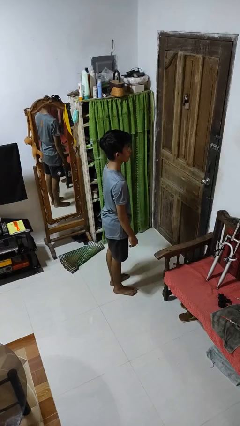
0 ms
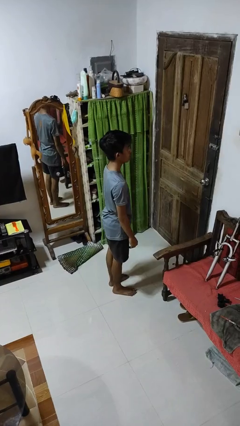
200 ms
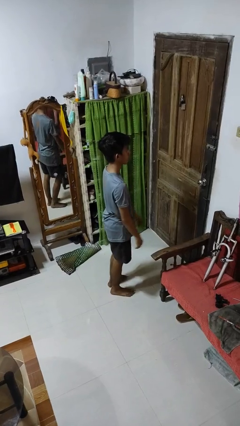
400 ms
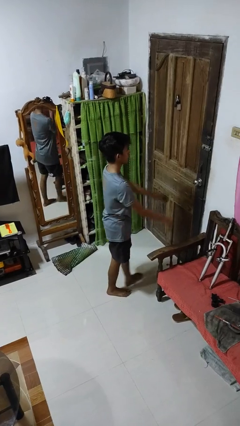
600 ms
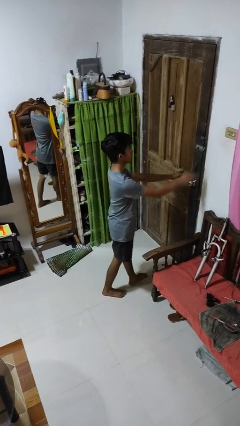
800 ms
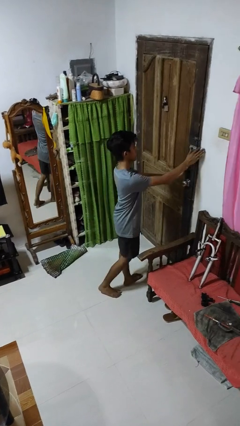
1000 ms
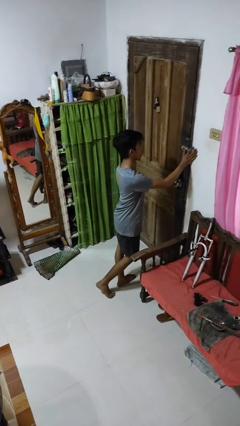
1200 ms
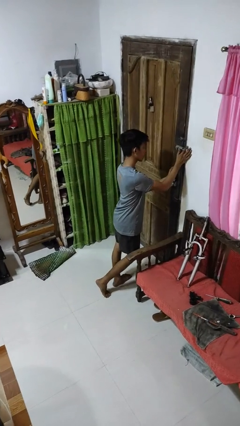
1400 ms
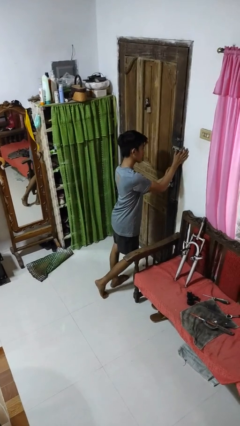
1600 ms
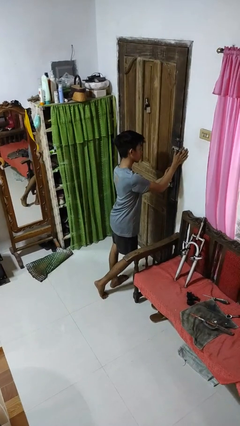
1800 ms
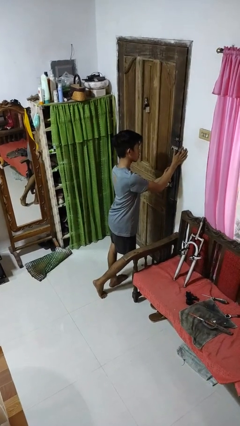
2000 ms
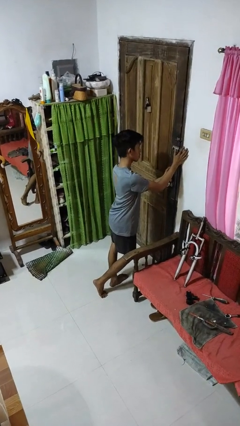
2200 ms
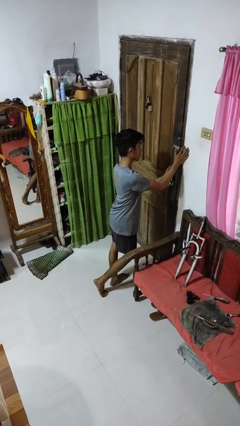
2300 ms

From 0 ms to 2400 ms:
person unlocks door with keys

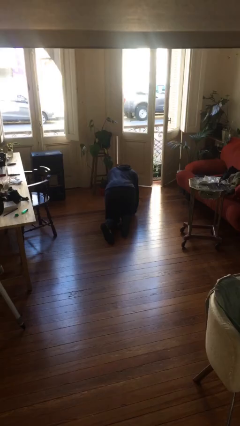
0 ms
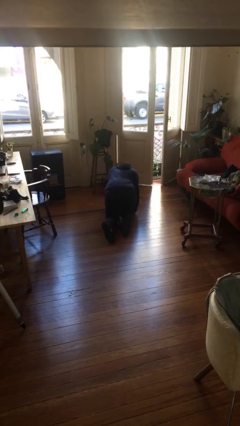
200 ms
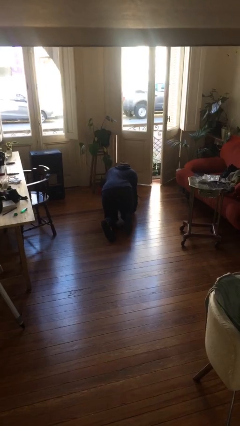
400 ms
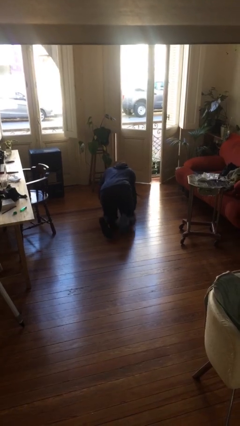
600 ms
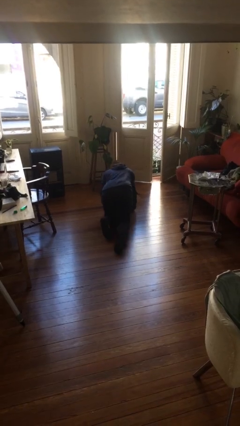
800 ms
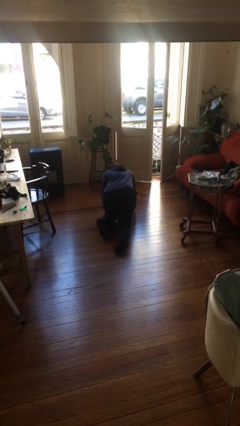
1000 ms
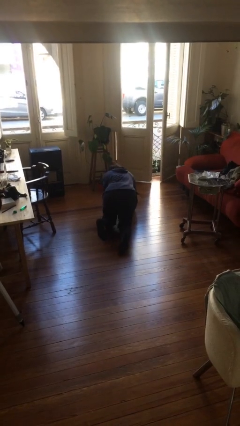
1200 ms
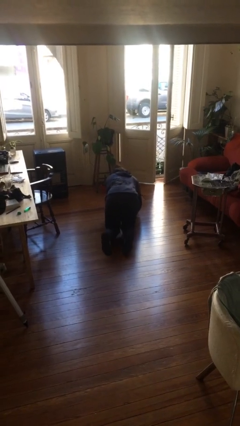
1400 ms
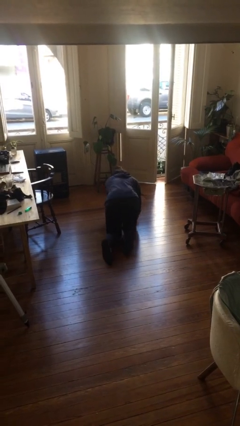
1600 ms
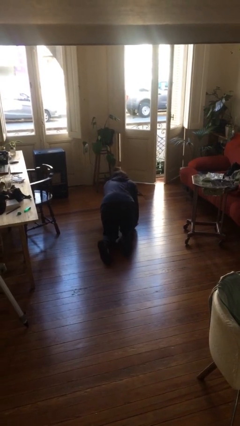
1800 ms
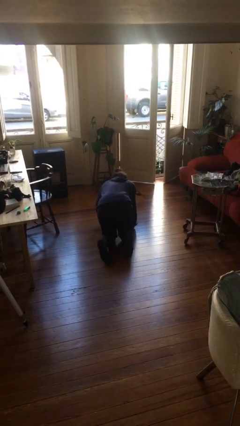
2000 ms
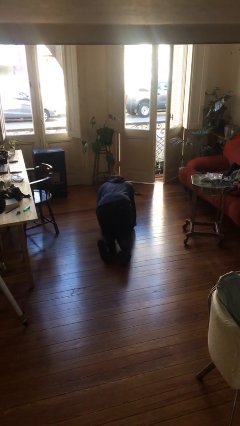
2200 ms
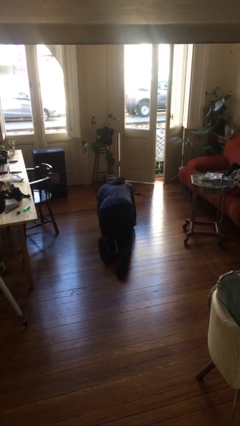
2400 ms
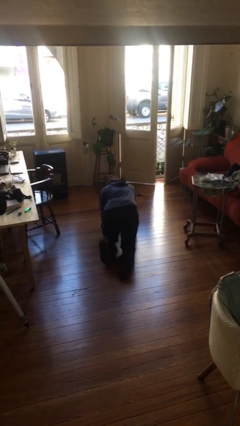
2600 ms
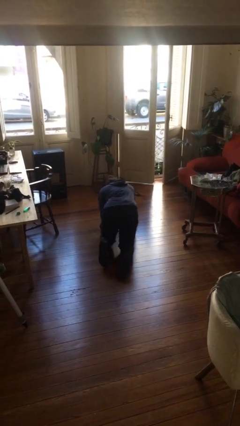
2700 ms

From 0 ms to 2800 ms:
person crawls

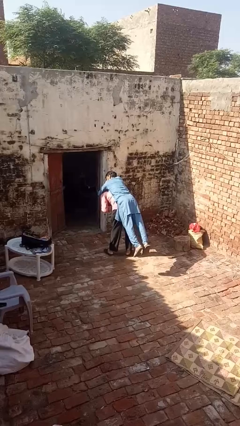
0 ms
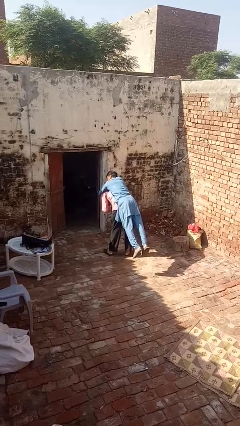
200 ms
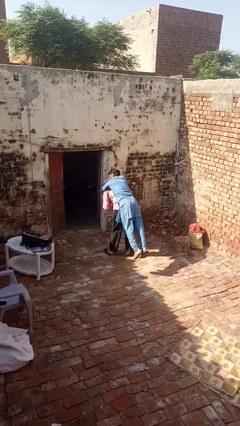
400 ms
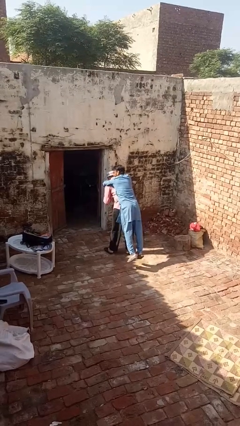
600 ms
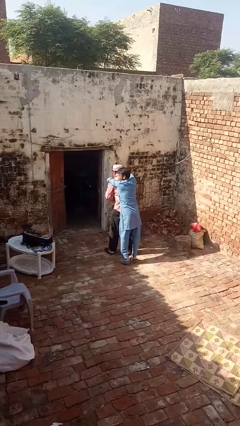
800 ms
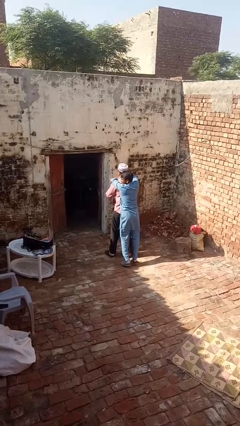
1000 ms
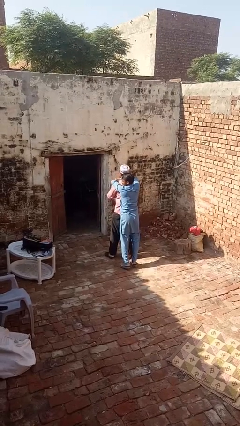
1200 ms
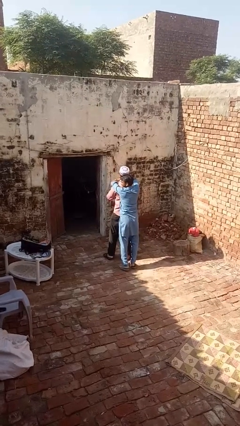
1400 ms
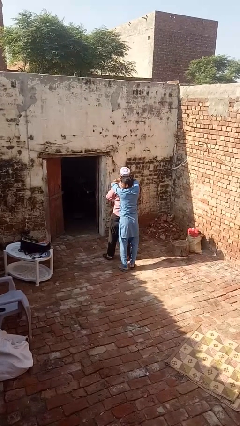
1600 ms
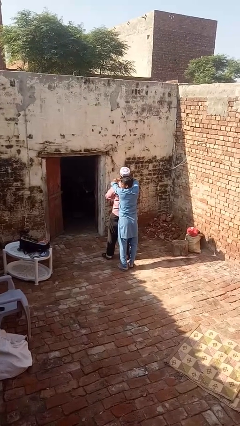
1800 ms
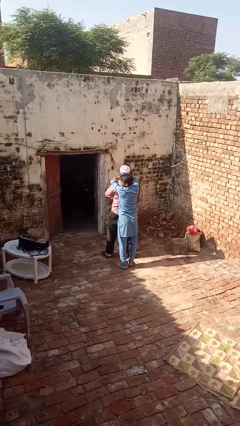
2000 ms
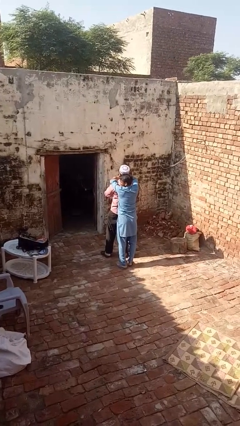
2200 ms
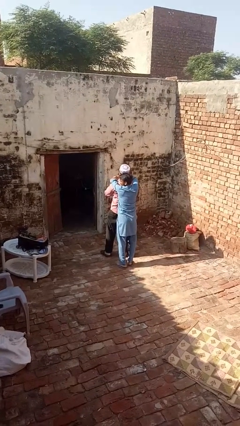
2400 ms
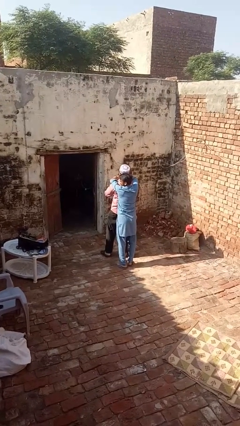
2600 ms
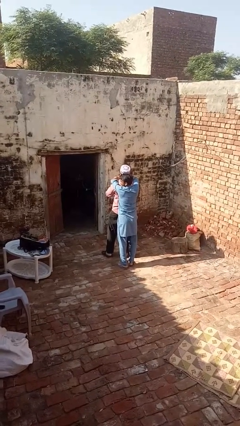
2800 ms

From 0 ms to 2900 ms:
person puts down person

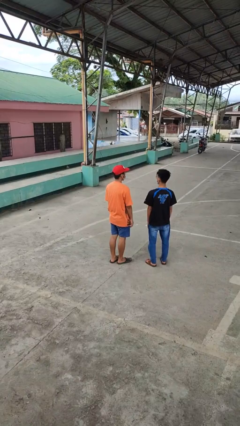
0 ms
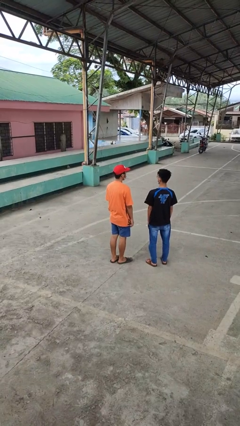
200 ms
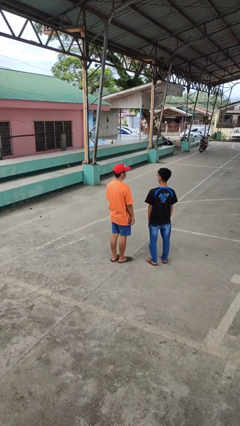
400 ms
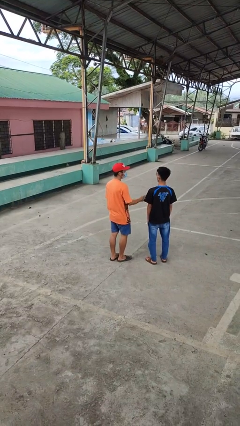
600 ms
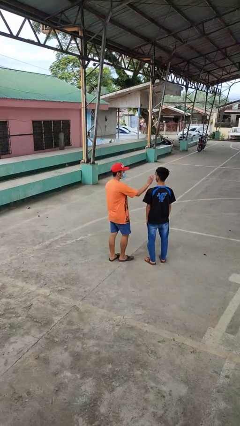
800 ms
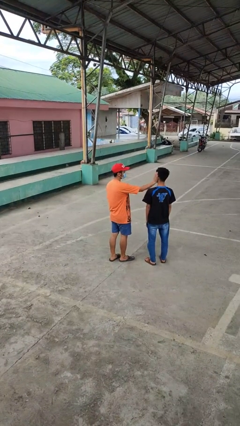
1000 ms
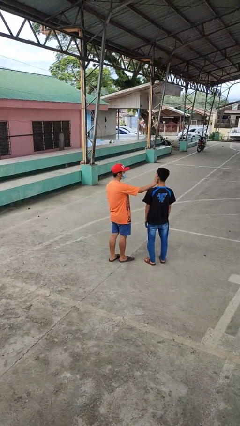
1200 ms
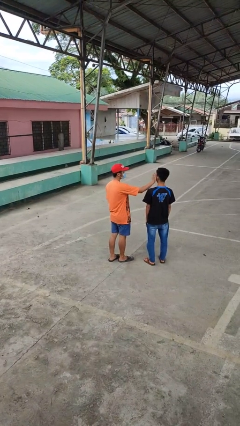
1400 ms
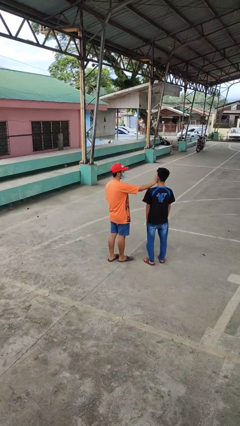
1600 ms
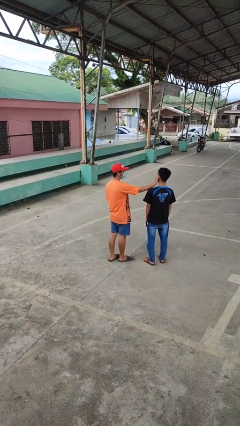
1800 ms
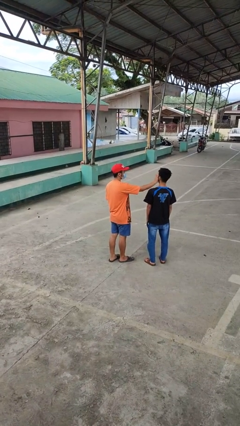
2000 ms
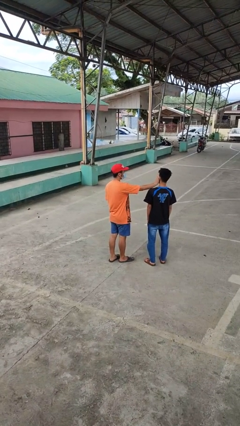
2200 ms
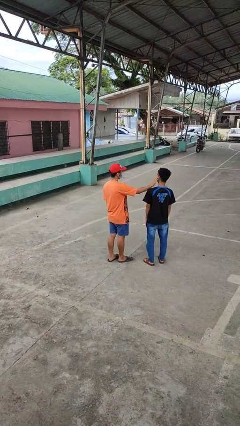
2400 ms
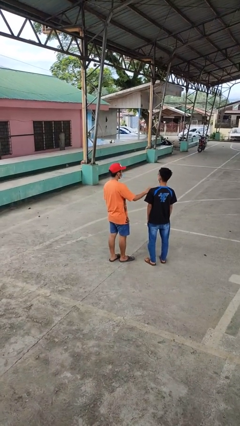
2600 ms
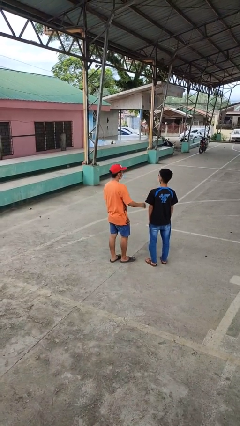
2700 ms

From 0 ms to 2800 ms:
person touches face of person

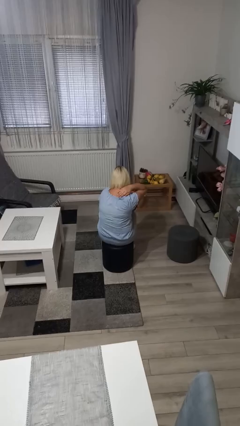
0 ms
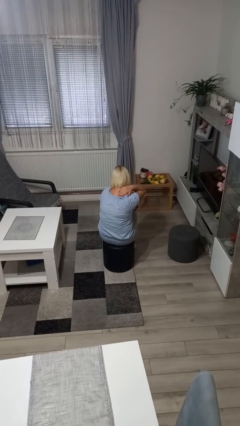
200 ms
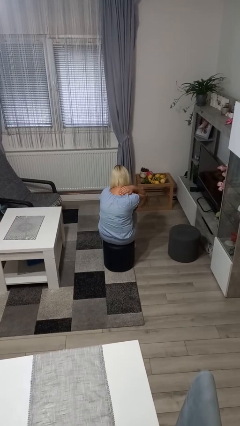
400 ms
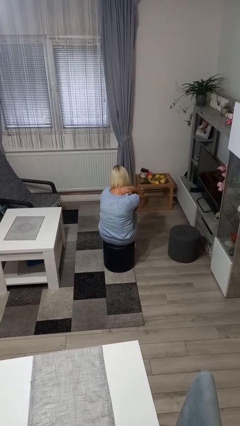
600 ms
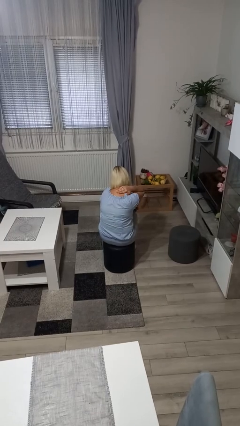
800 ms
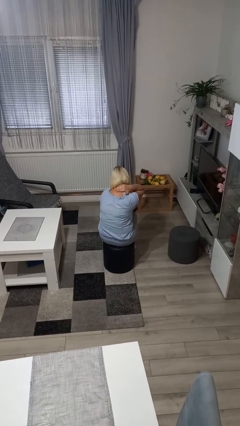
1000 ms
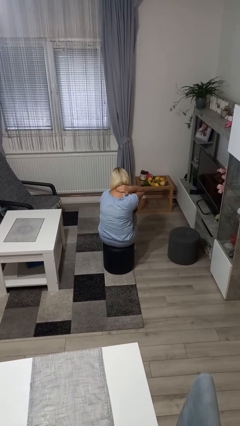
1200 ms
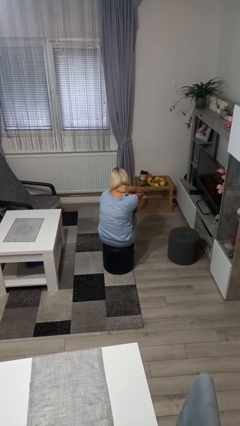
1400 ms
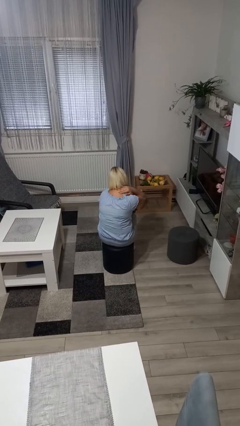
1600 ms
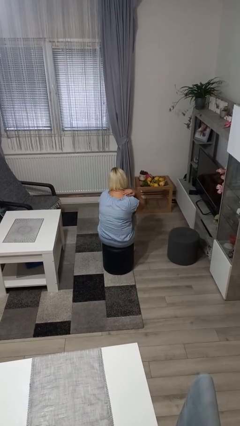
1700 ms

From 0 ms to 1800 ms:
person rubs neck

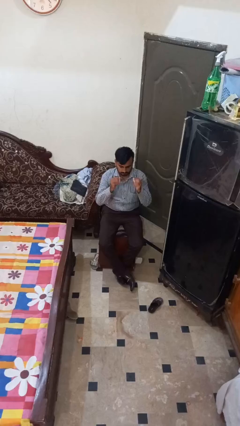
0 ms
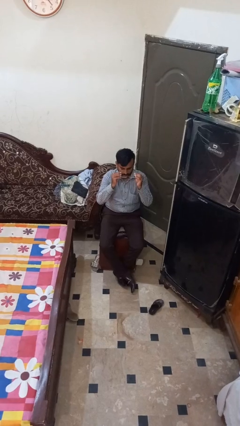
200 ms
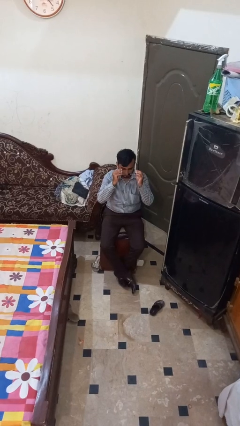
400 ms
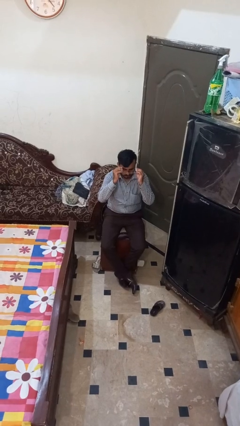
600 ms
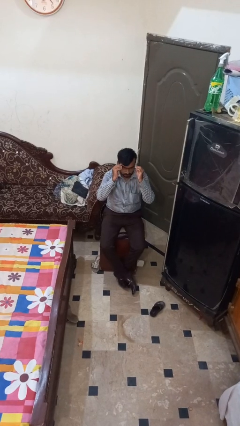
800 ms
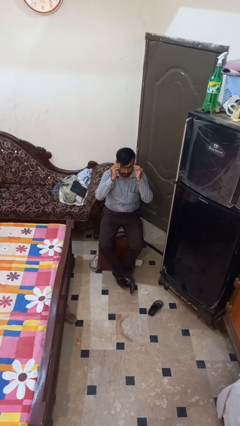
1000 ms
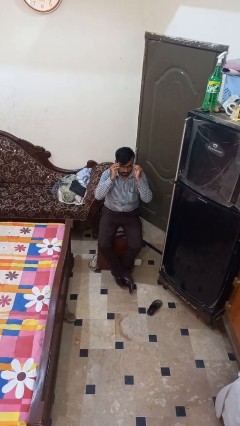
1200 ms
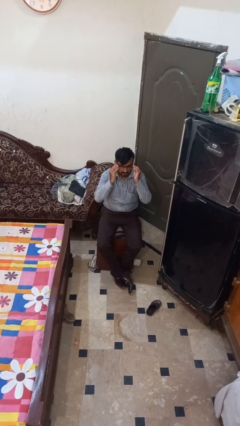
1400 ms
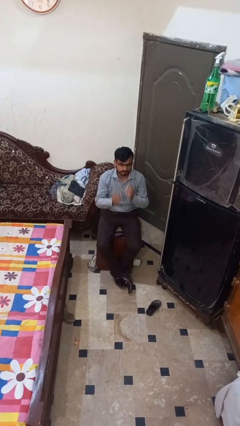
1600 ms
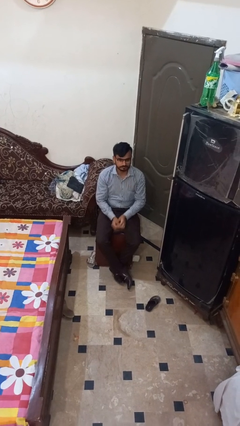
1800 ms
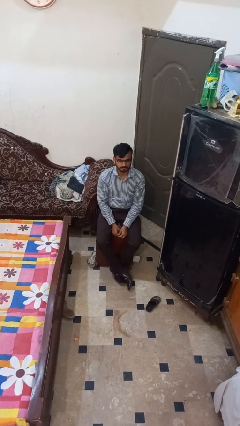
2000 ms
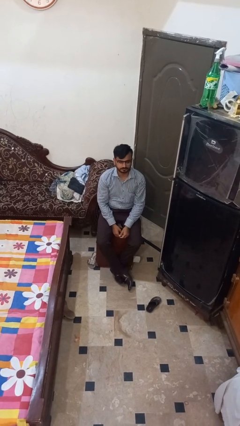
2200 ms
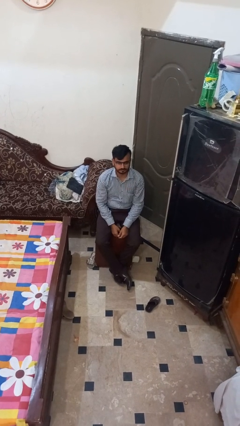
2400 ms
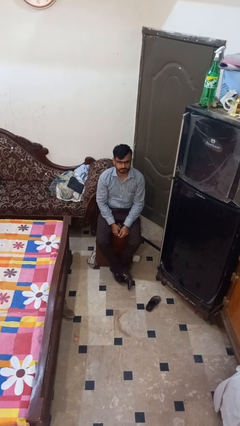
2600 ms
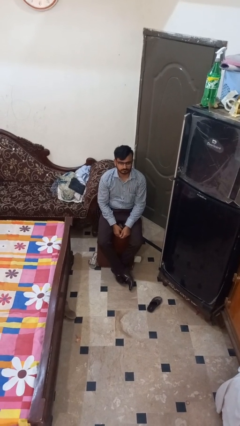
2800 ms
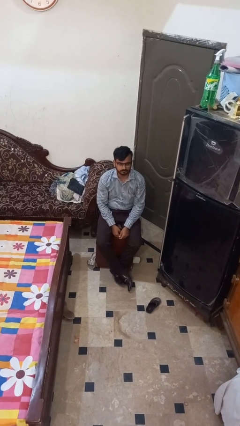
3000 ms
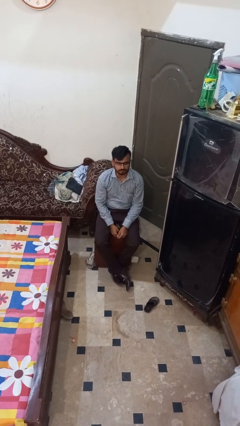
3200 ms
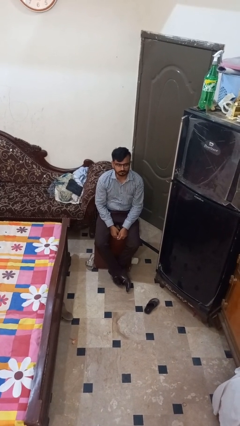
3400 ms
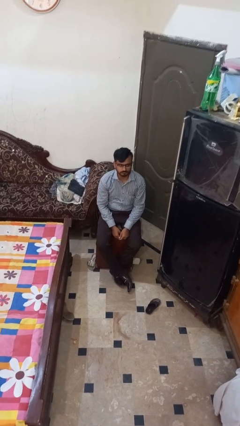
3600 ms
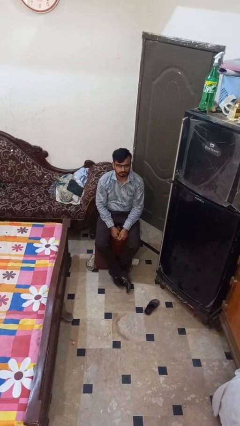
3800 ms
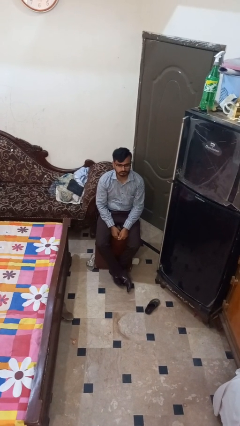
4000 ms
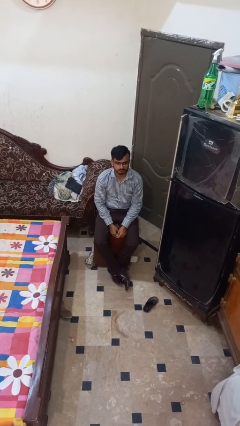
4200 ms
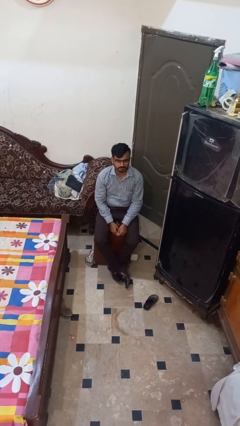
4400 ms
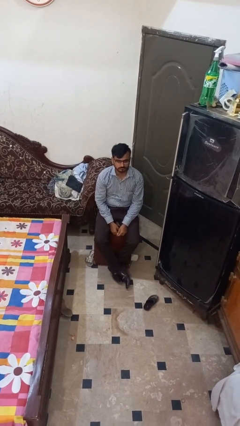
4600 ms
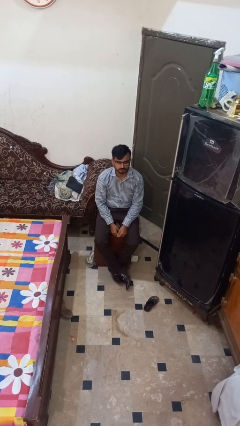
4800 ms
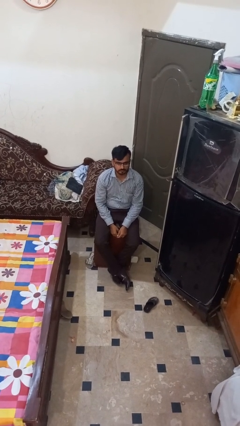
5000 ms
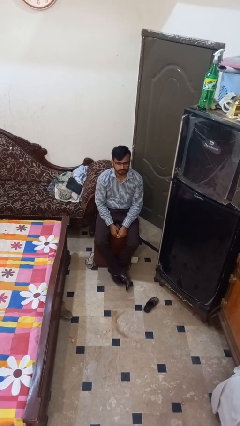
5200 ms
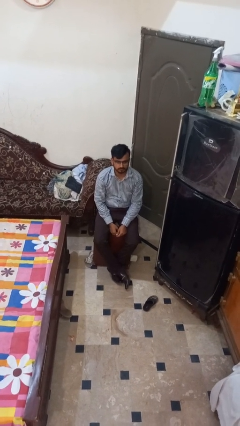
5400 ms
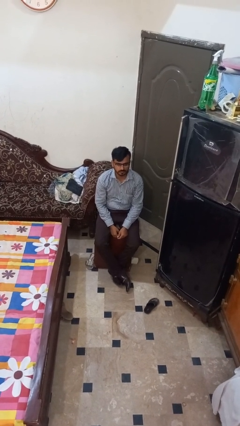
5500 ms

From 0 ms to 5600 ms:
person puts on glasses
